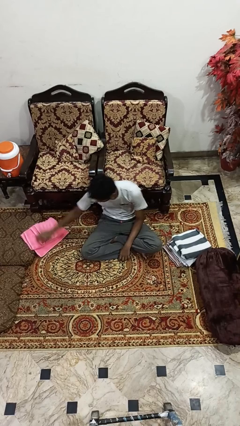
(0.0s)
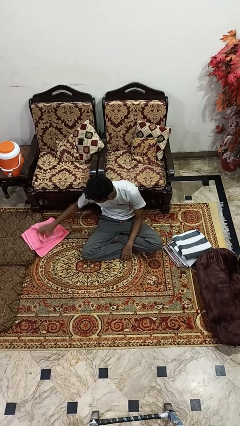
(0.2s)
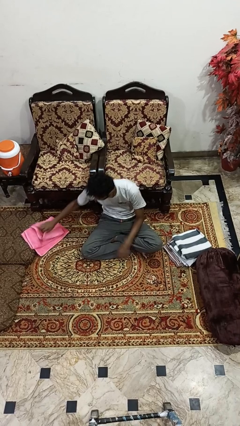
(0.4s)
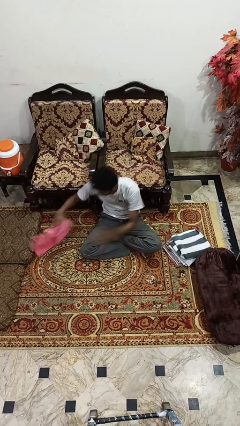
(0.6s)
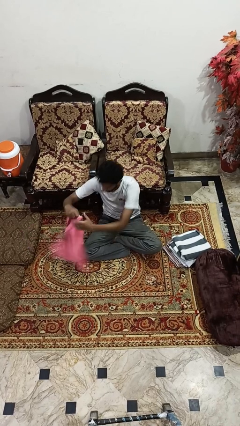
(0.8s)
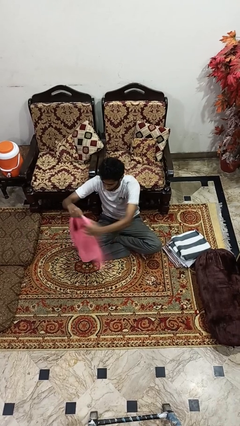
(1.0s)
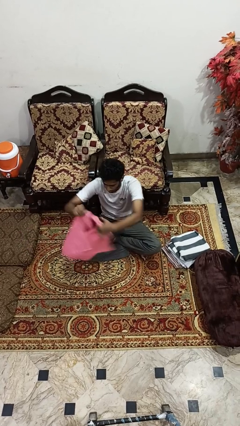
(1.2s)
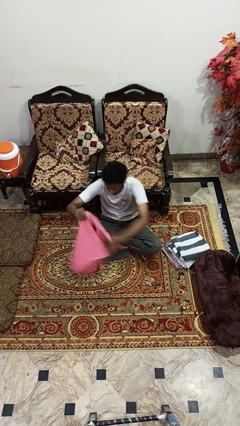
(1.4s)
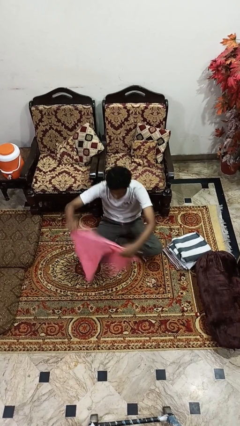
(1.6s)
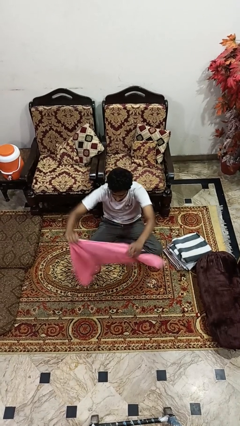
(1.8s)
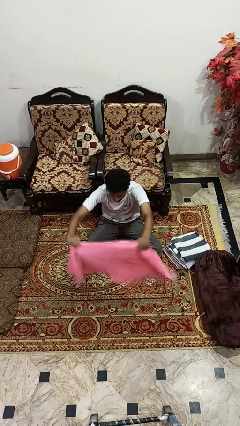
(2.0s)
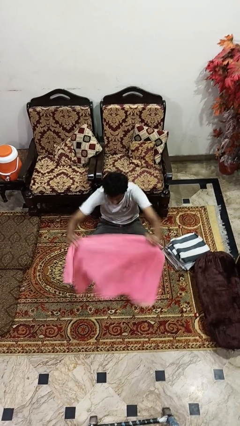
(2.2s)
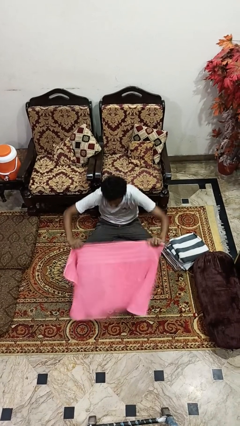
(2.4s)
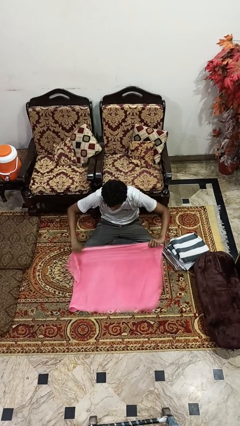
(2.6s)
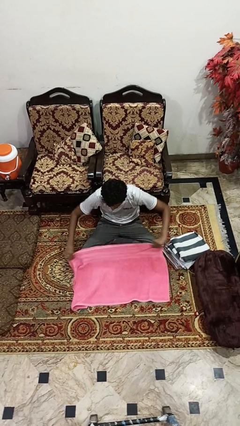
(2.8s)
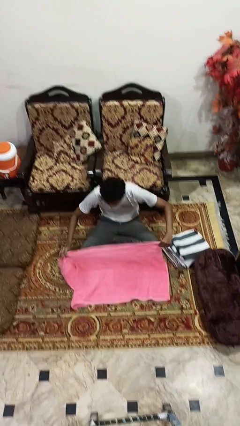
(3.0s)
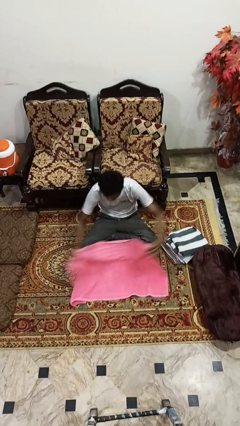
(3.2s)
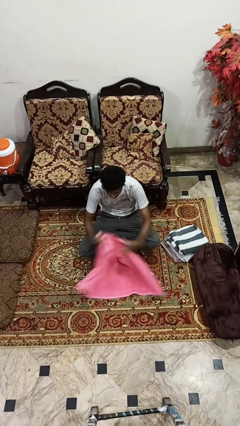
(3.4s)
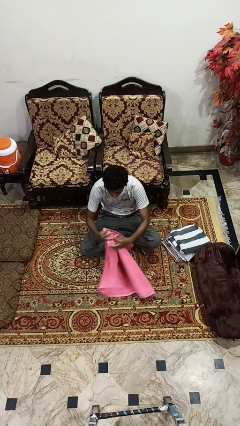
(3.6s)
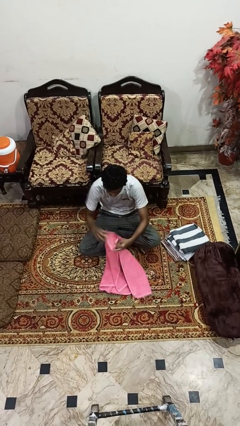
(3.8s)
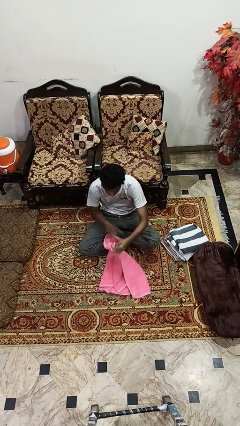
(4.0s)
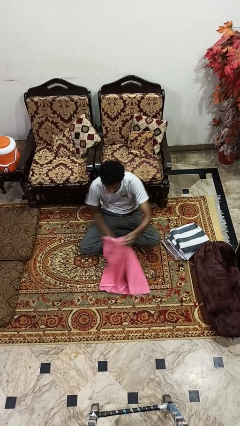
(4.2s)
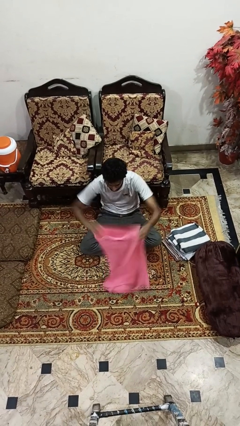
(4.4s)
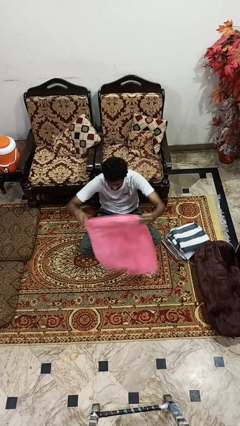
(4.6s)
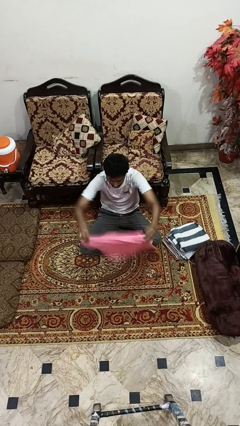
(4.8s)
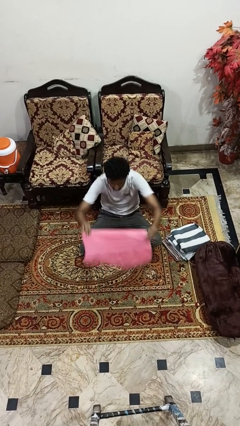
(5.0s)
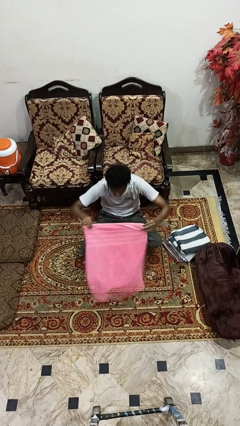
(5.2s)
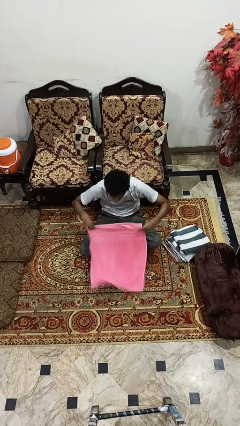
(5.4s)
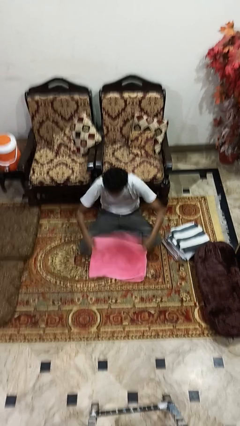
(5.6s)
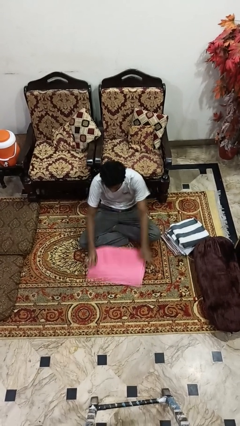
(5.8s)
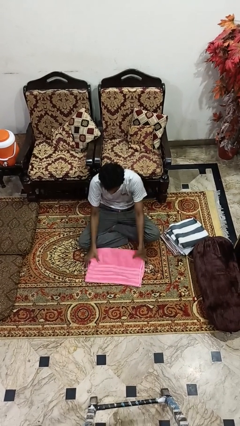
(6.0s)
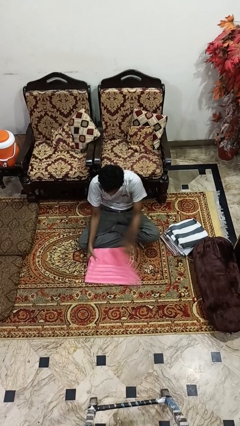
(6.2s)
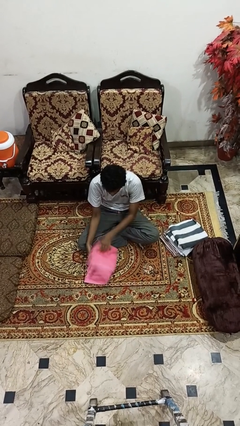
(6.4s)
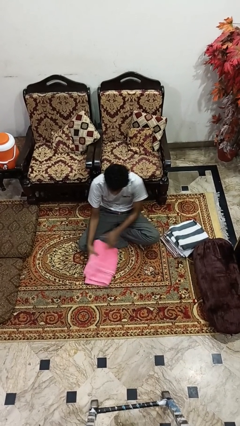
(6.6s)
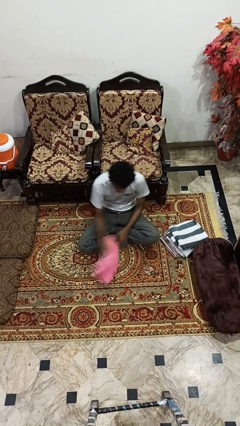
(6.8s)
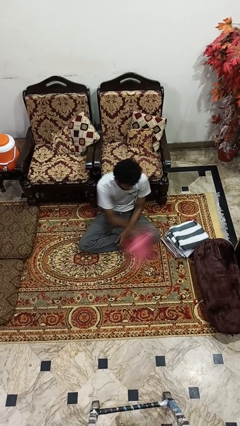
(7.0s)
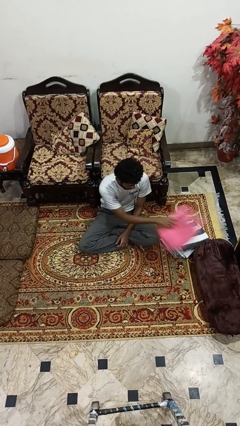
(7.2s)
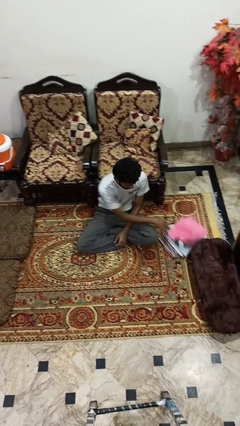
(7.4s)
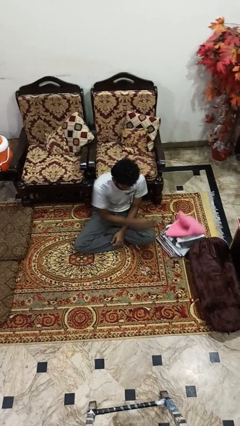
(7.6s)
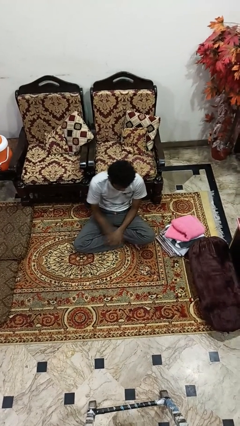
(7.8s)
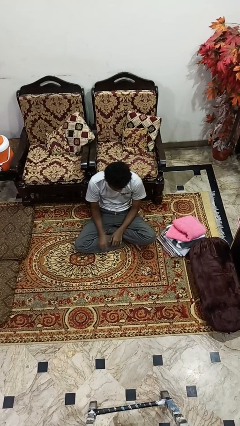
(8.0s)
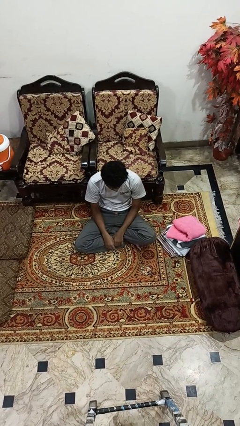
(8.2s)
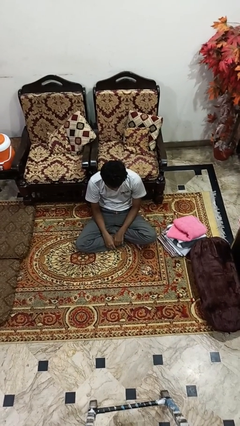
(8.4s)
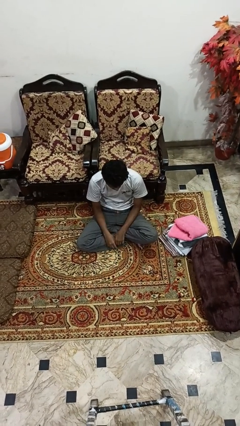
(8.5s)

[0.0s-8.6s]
person folds towel

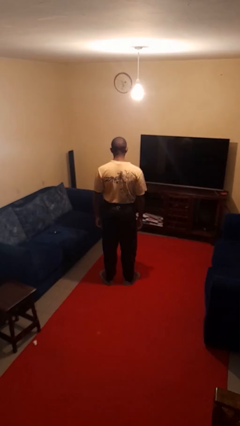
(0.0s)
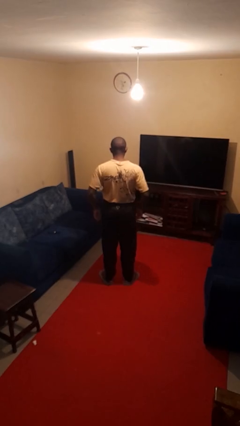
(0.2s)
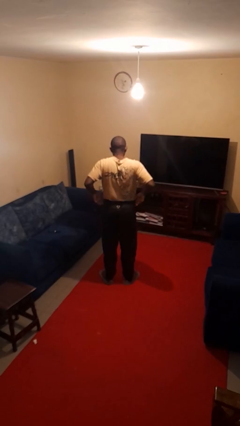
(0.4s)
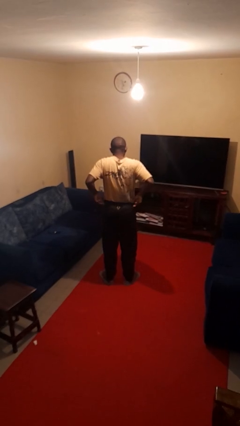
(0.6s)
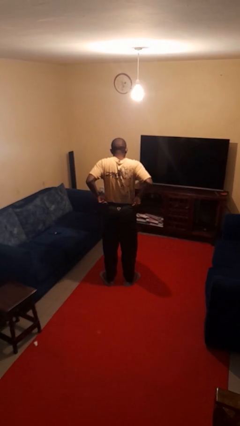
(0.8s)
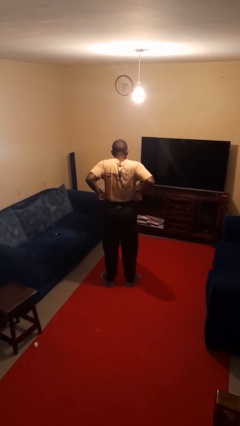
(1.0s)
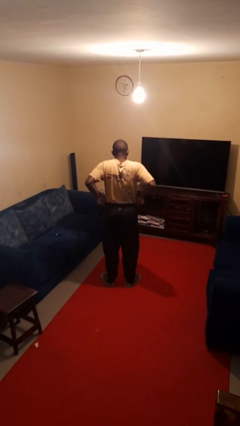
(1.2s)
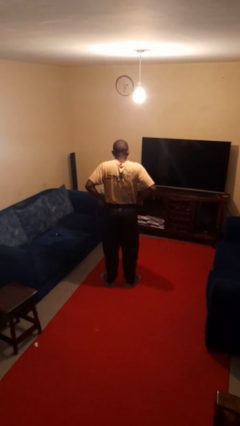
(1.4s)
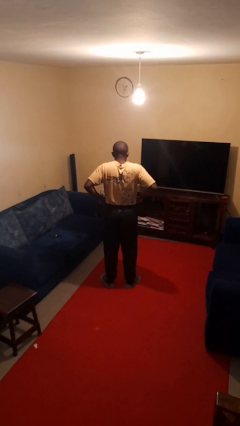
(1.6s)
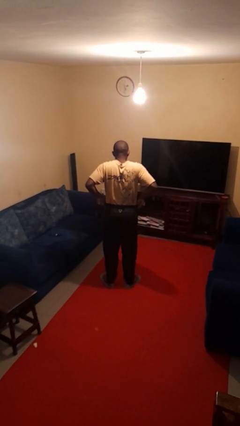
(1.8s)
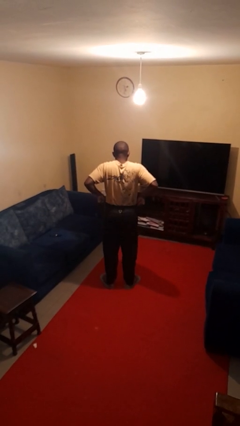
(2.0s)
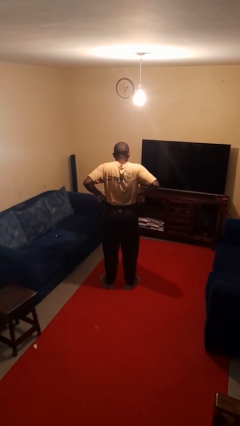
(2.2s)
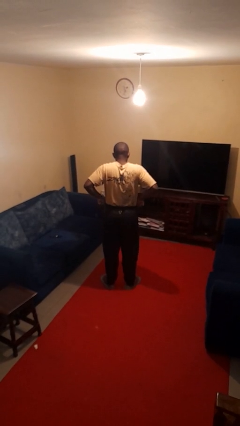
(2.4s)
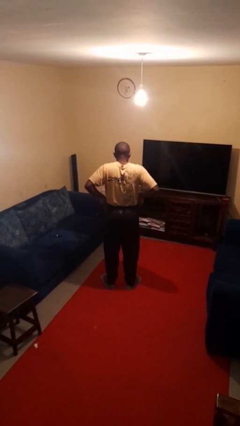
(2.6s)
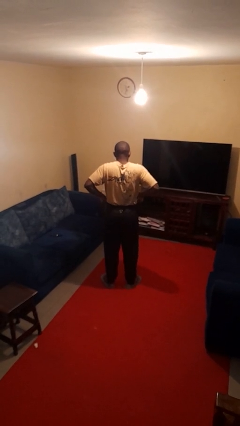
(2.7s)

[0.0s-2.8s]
person hikes up pants

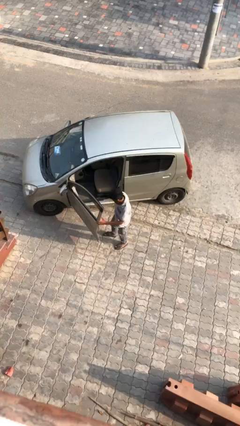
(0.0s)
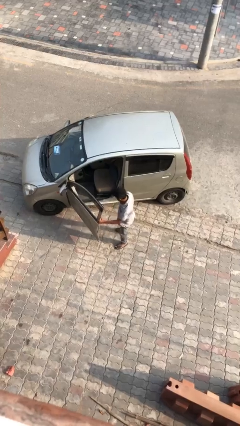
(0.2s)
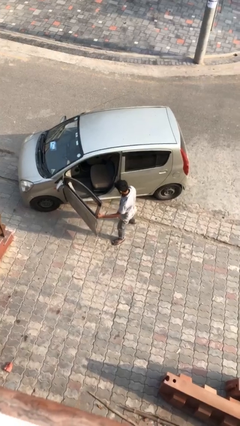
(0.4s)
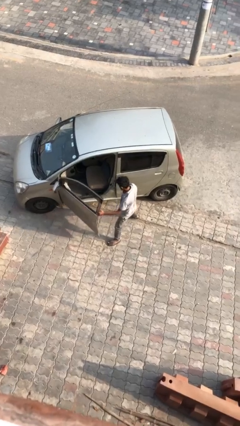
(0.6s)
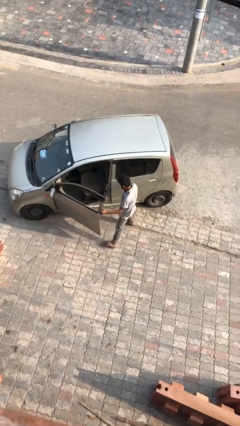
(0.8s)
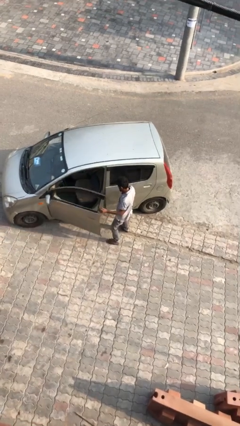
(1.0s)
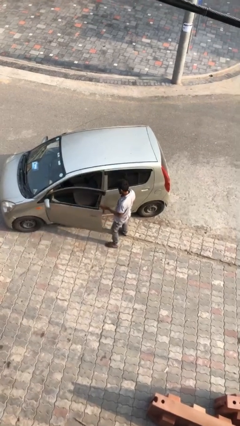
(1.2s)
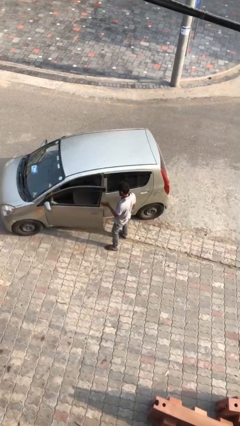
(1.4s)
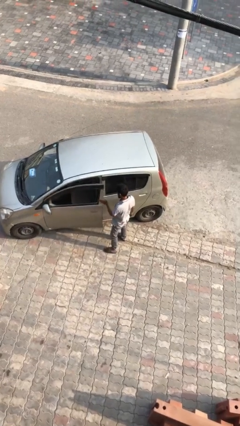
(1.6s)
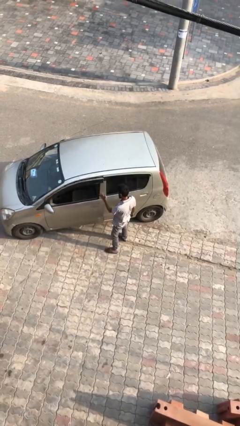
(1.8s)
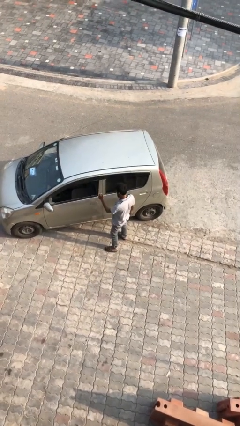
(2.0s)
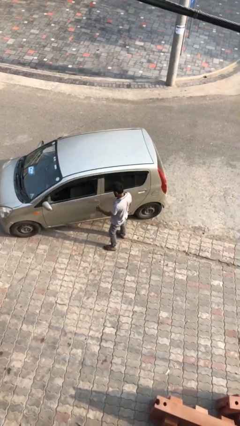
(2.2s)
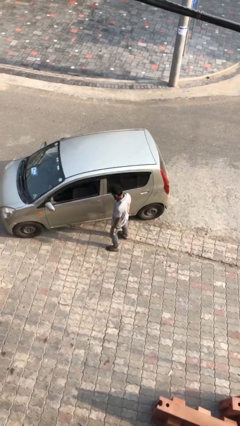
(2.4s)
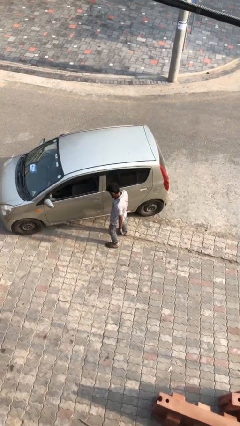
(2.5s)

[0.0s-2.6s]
person closes car door

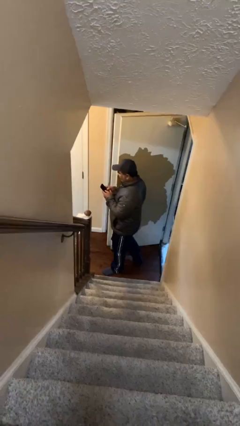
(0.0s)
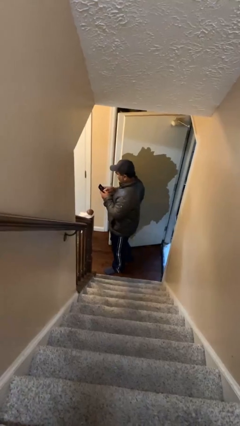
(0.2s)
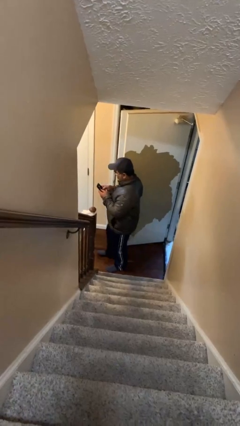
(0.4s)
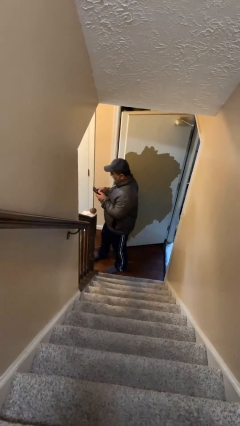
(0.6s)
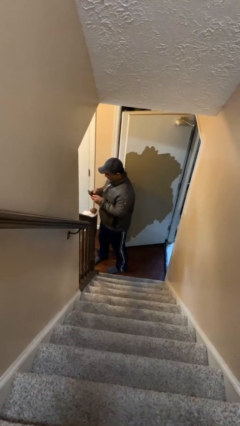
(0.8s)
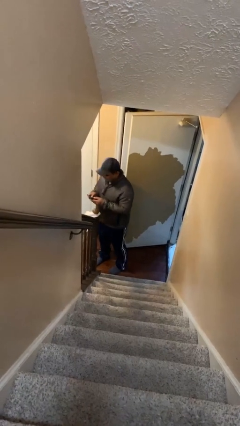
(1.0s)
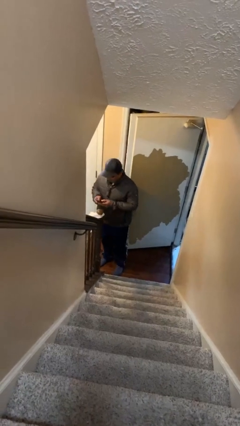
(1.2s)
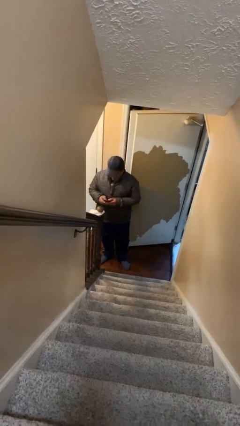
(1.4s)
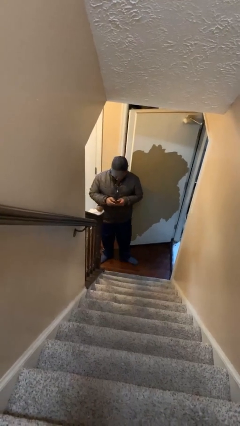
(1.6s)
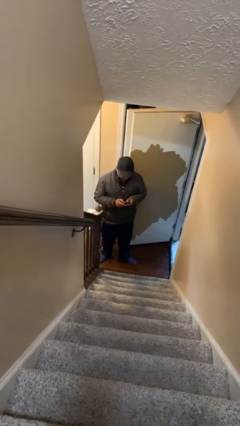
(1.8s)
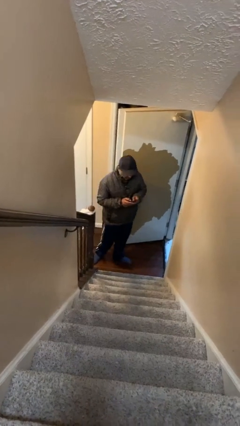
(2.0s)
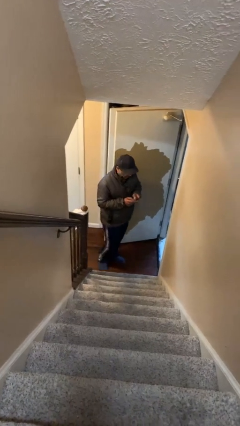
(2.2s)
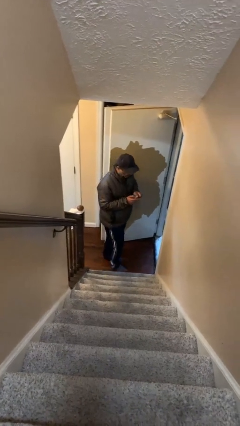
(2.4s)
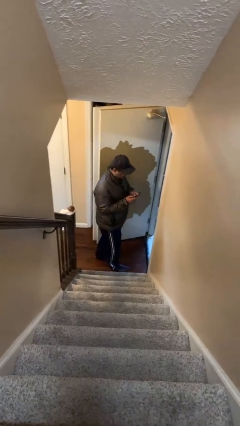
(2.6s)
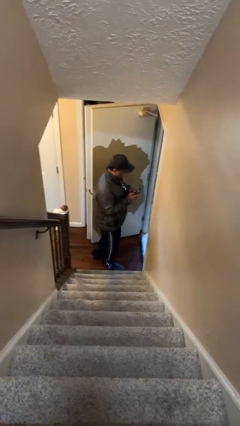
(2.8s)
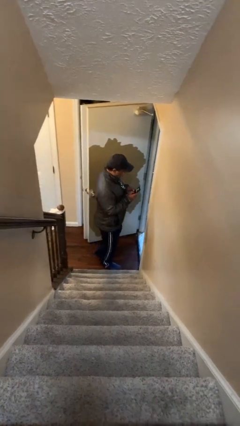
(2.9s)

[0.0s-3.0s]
person exits scene through structure

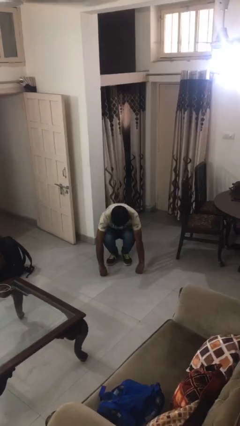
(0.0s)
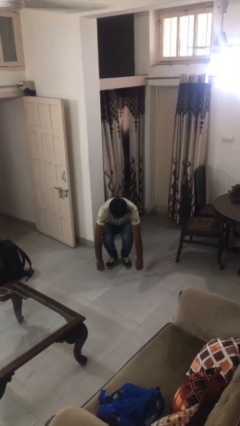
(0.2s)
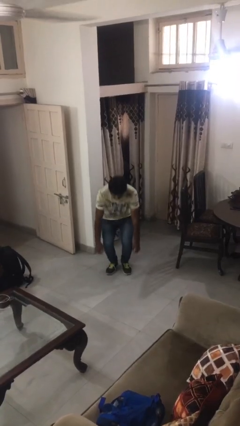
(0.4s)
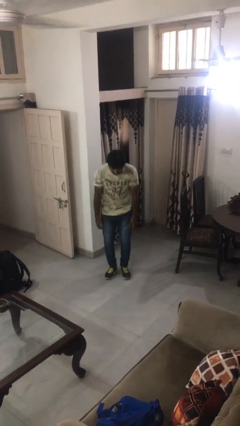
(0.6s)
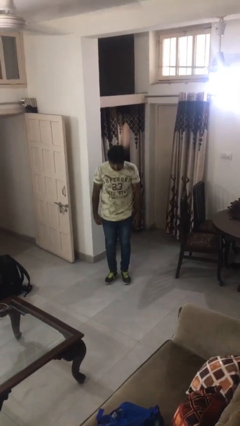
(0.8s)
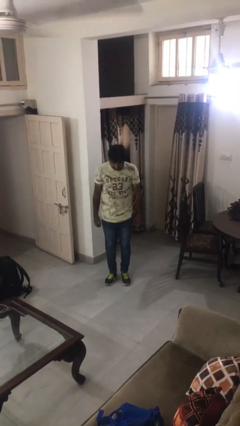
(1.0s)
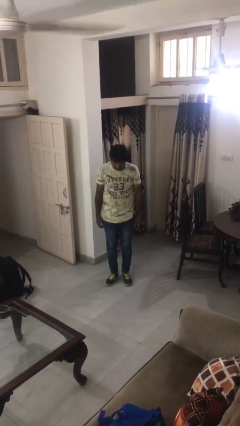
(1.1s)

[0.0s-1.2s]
person stands up
